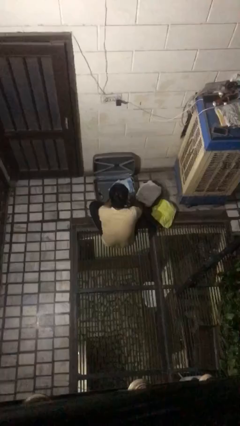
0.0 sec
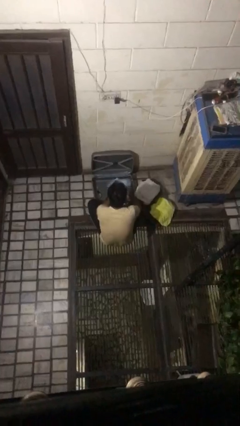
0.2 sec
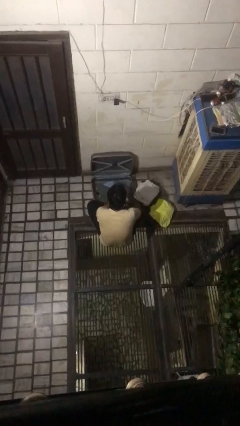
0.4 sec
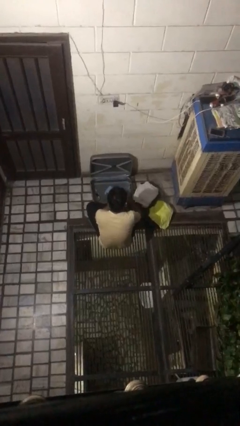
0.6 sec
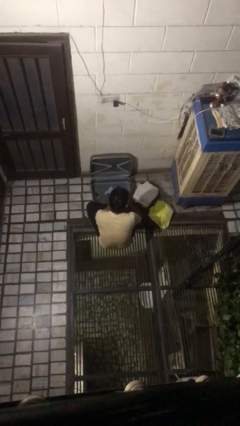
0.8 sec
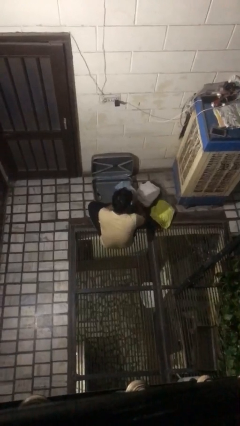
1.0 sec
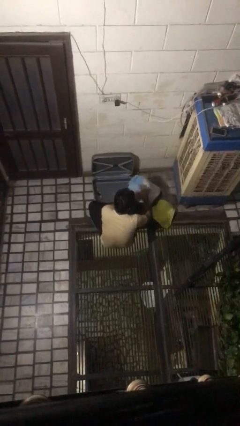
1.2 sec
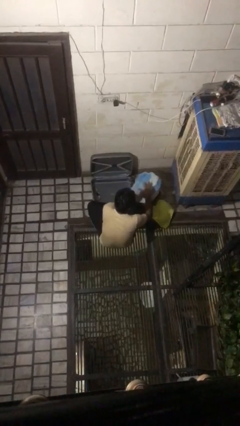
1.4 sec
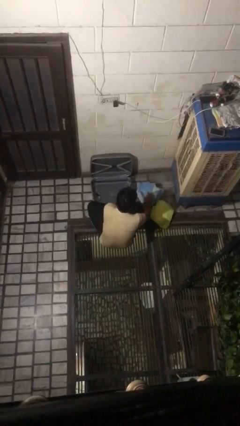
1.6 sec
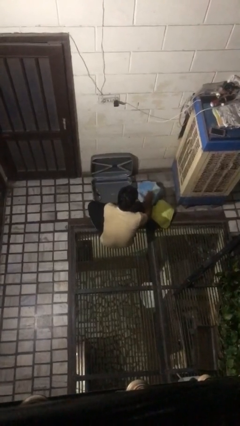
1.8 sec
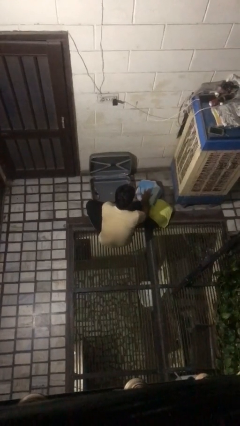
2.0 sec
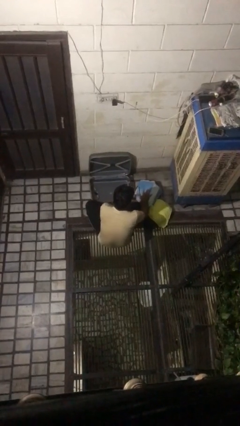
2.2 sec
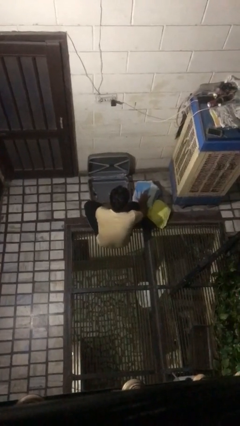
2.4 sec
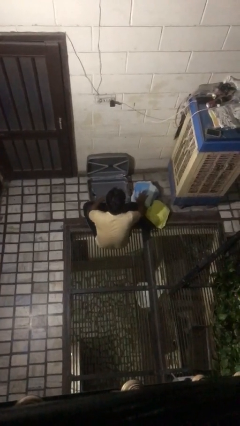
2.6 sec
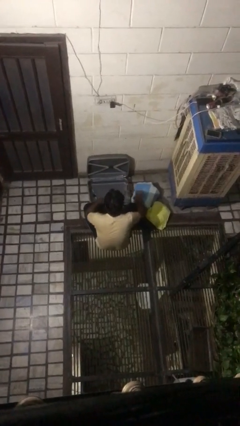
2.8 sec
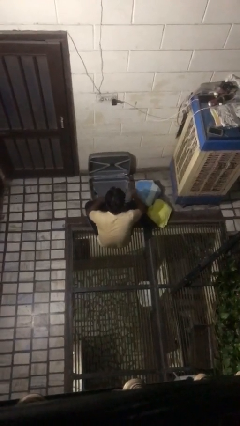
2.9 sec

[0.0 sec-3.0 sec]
person unloads clothes from suitcase

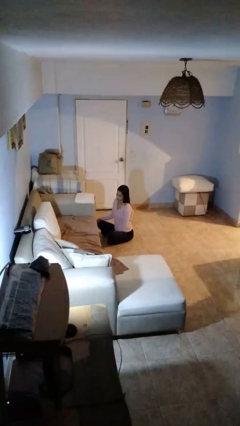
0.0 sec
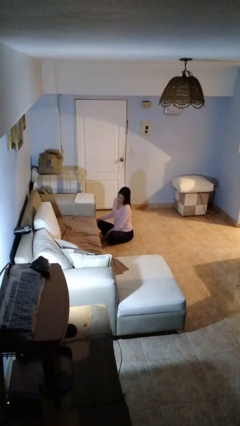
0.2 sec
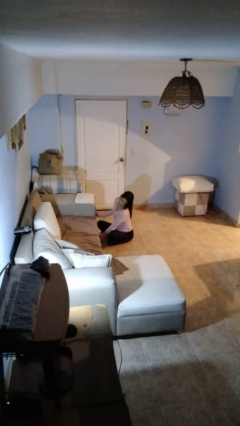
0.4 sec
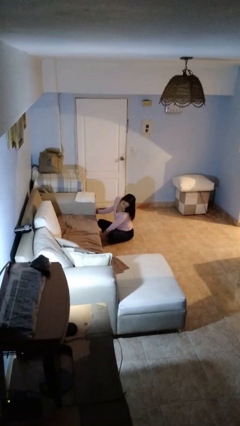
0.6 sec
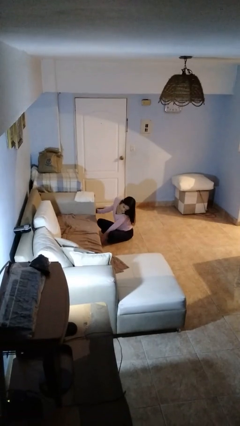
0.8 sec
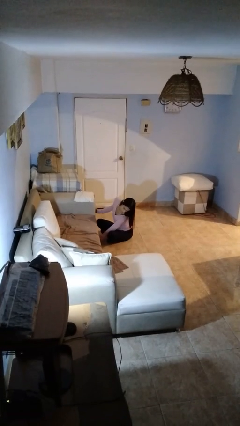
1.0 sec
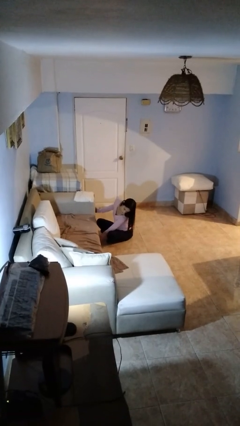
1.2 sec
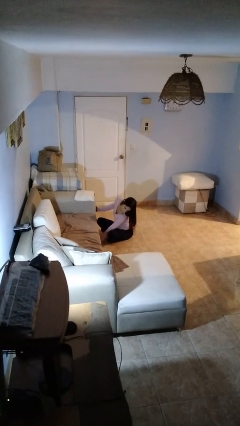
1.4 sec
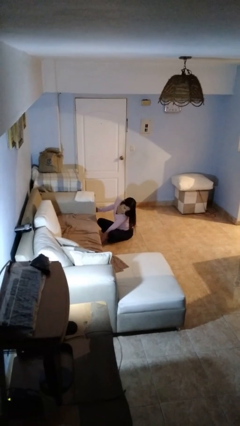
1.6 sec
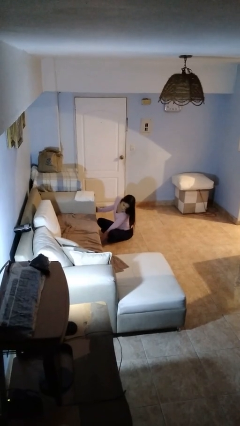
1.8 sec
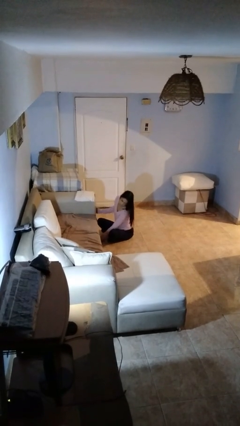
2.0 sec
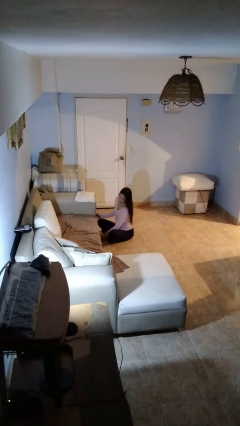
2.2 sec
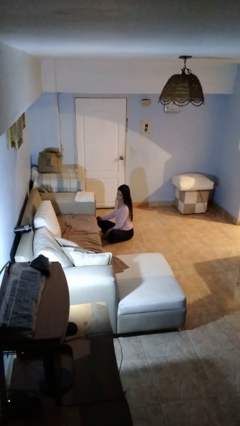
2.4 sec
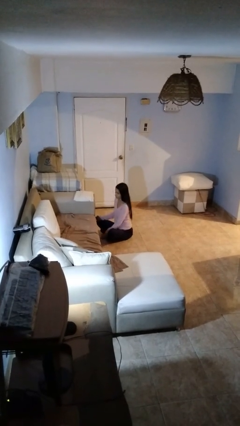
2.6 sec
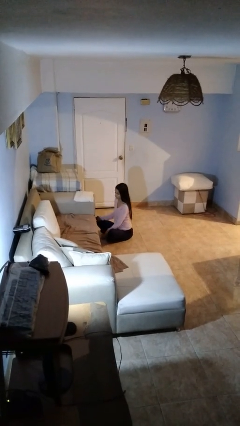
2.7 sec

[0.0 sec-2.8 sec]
person searches under couch

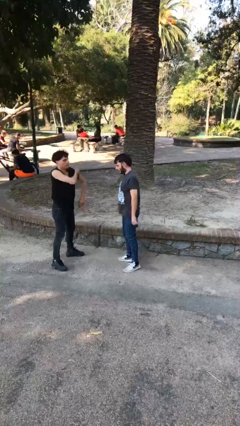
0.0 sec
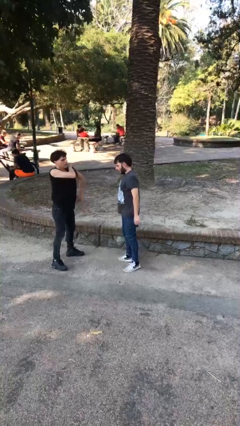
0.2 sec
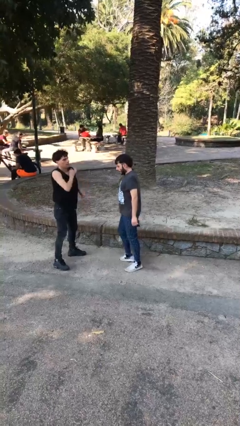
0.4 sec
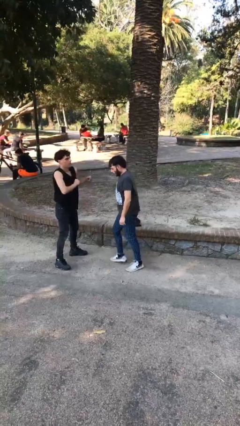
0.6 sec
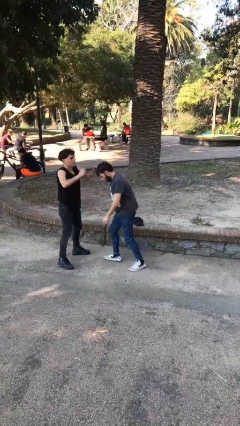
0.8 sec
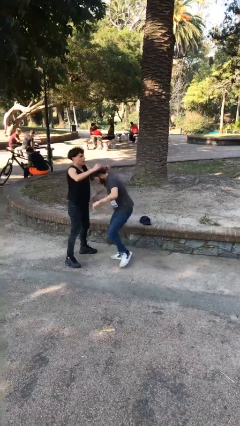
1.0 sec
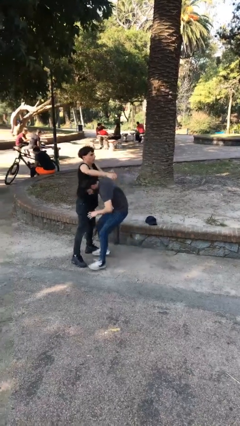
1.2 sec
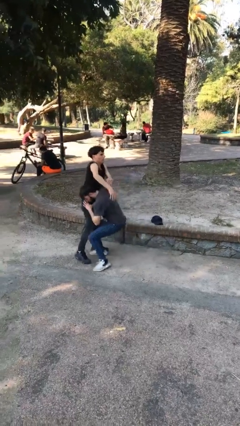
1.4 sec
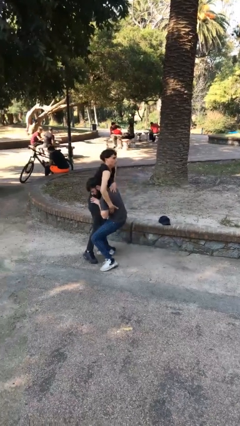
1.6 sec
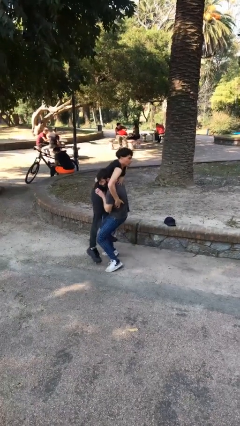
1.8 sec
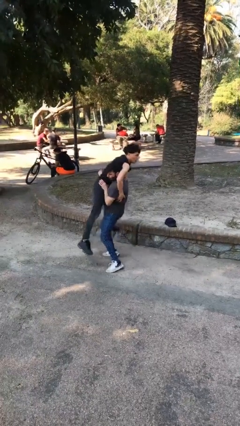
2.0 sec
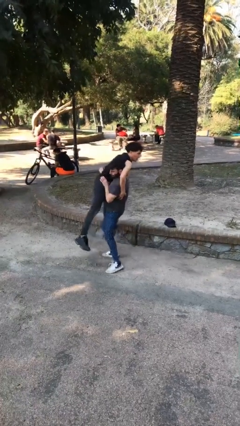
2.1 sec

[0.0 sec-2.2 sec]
person picks up person

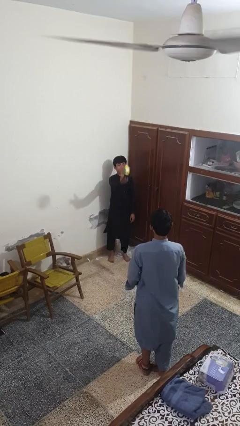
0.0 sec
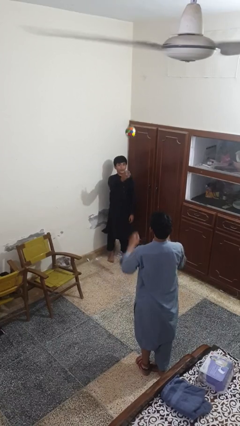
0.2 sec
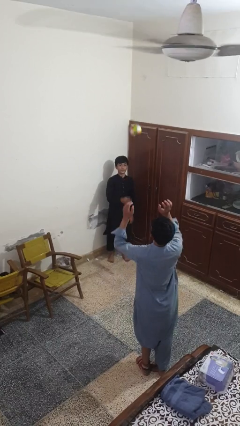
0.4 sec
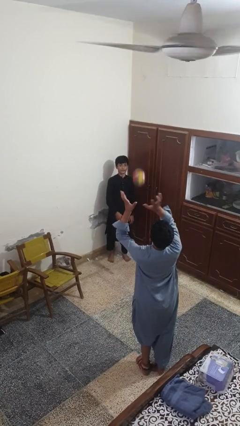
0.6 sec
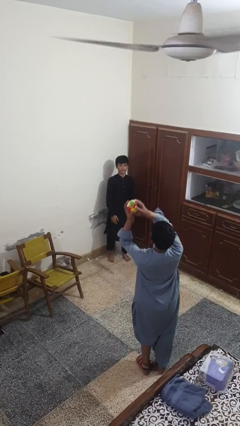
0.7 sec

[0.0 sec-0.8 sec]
person throws object to person

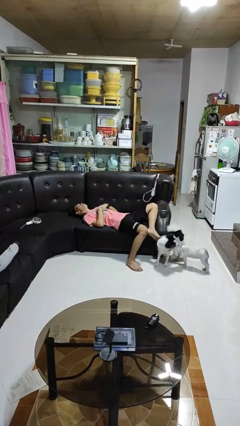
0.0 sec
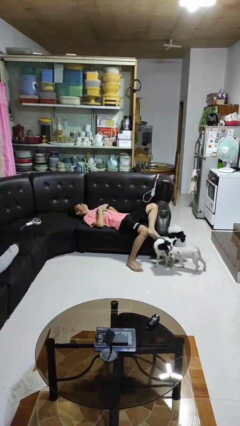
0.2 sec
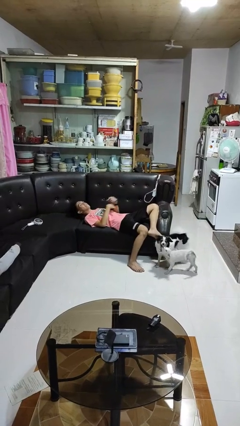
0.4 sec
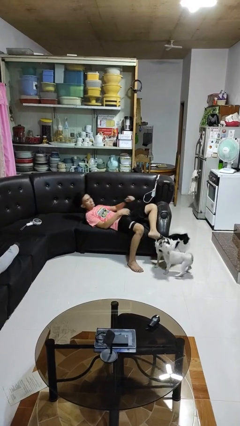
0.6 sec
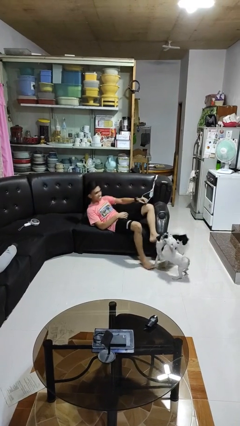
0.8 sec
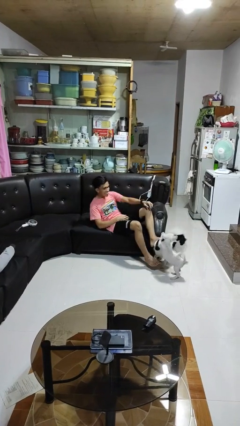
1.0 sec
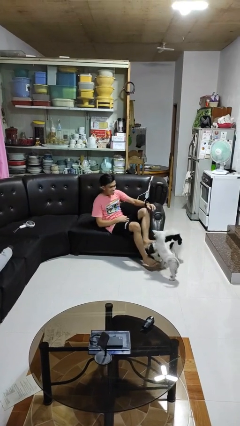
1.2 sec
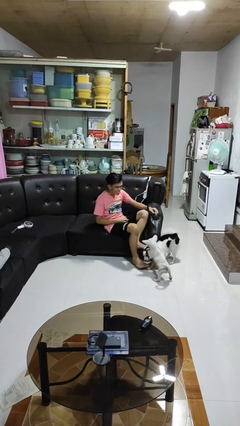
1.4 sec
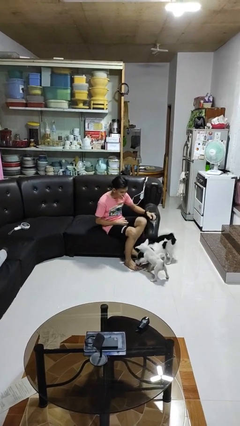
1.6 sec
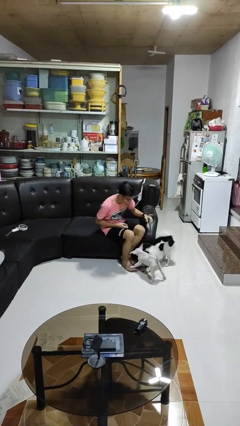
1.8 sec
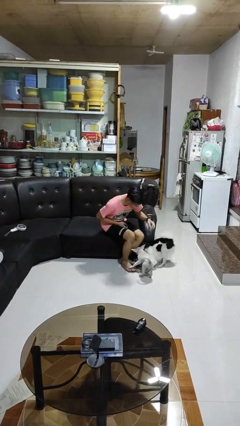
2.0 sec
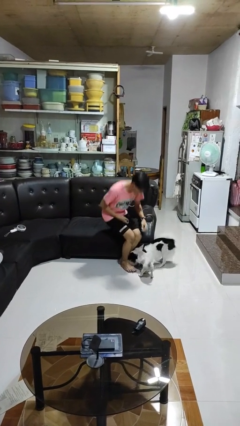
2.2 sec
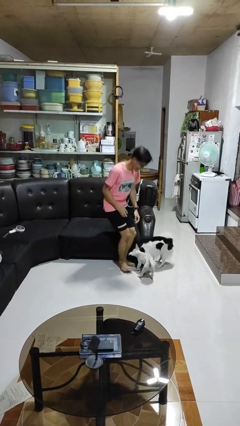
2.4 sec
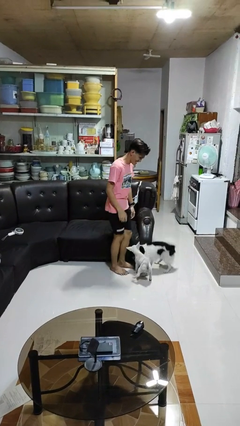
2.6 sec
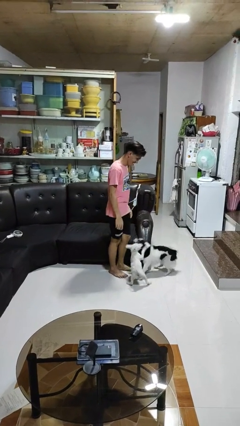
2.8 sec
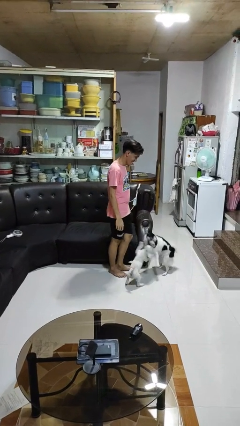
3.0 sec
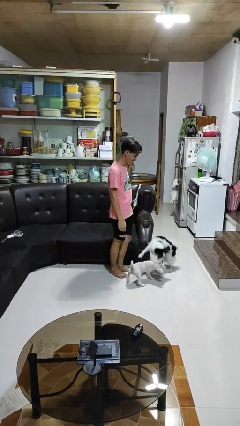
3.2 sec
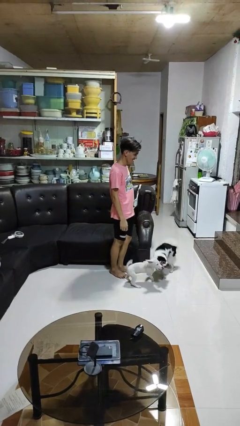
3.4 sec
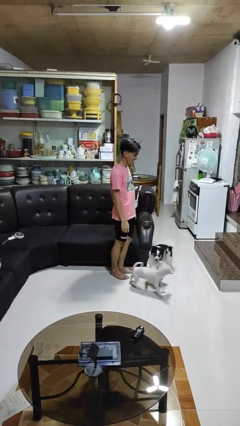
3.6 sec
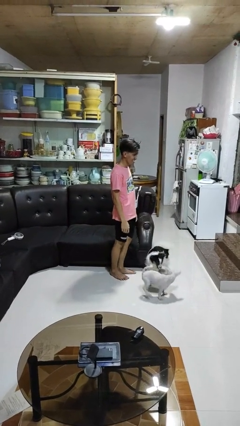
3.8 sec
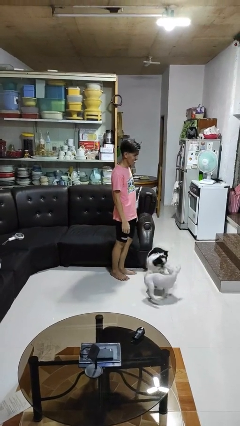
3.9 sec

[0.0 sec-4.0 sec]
person stands up

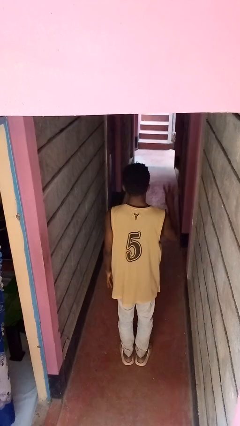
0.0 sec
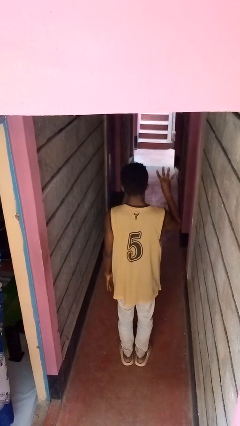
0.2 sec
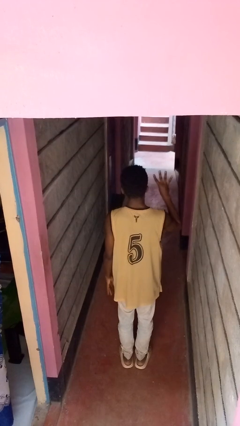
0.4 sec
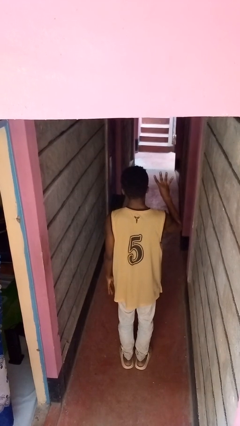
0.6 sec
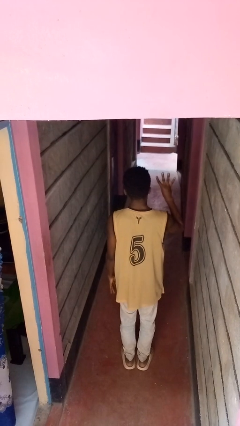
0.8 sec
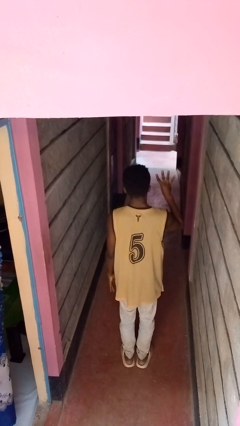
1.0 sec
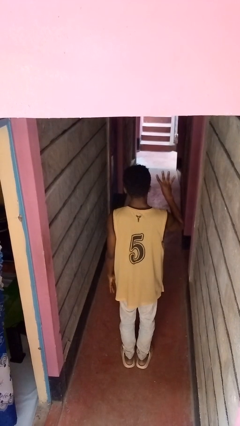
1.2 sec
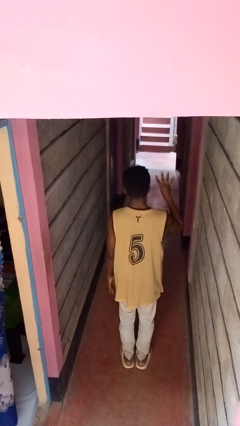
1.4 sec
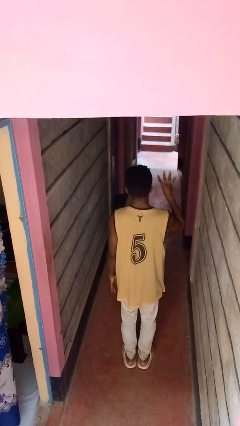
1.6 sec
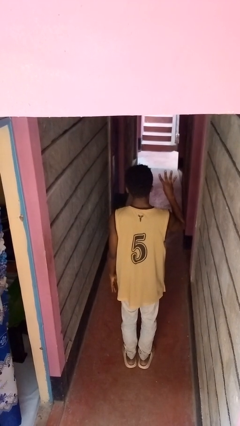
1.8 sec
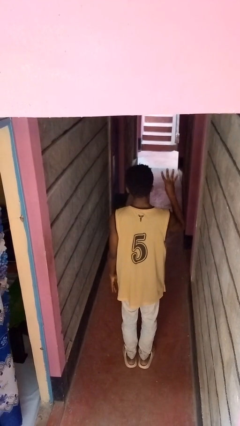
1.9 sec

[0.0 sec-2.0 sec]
person gestures number four

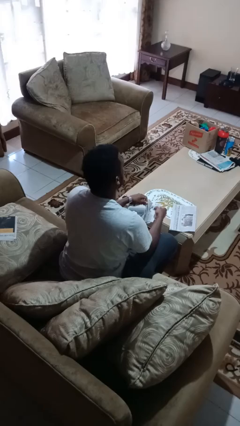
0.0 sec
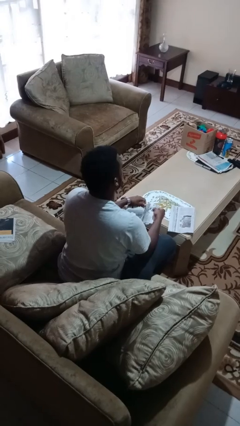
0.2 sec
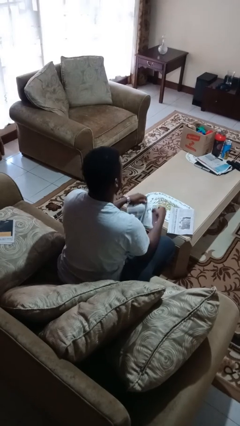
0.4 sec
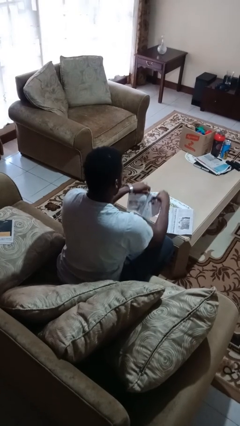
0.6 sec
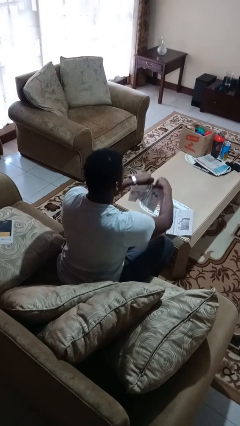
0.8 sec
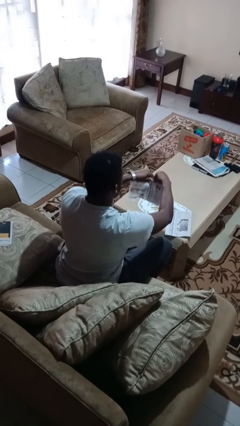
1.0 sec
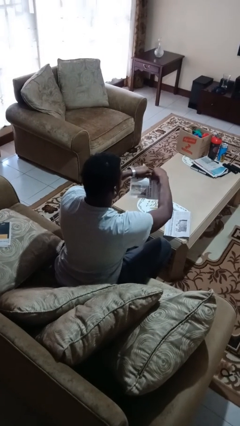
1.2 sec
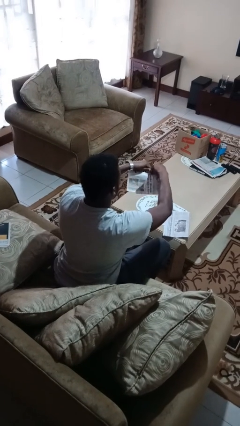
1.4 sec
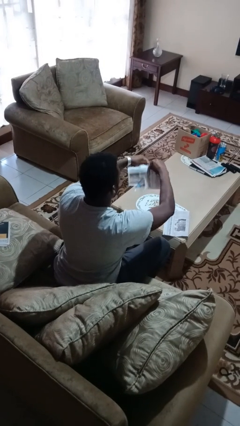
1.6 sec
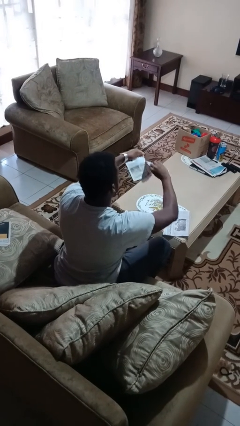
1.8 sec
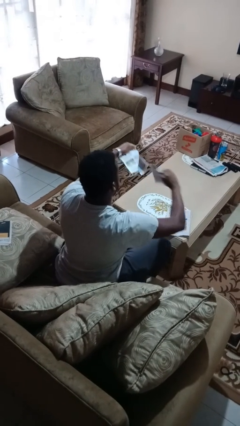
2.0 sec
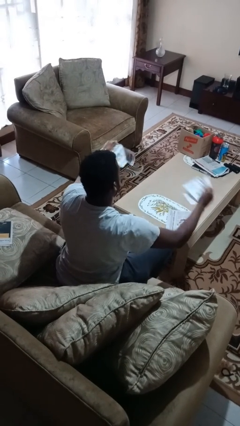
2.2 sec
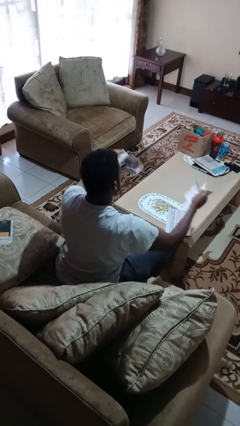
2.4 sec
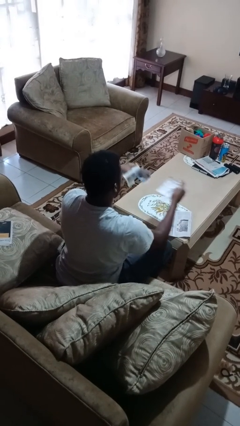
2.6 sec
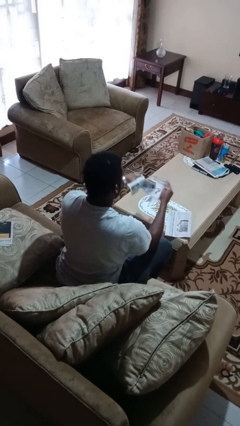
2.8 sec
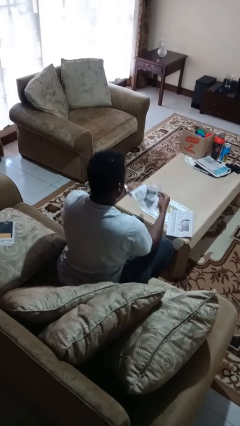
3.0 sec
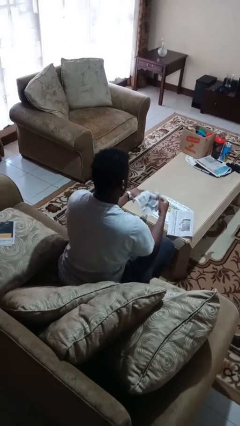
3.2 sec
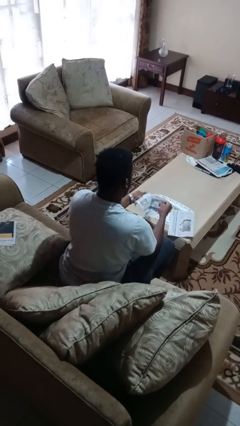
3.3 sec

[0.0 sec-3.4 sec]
person tears paper
